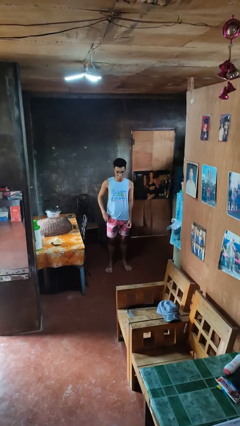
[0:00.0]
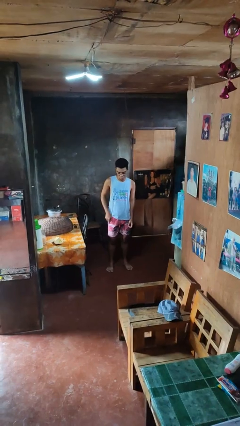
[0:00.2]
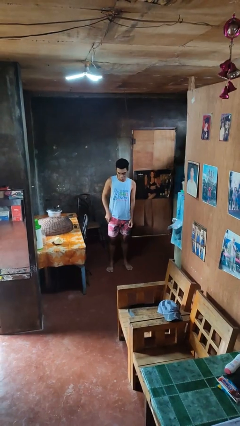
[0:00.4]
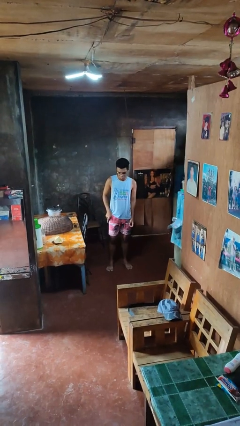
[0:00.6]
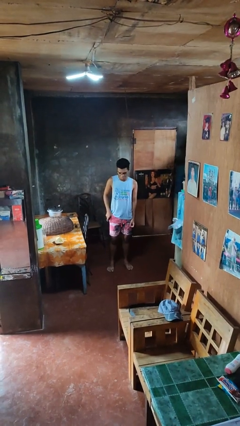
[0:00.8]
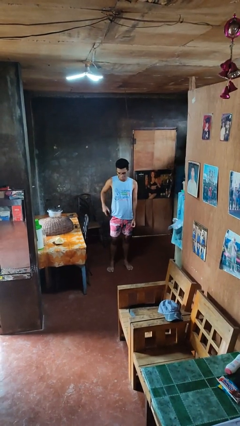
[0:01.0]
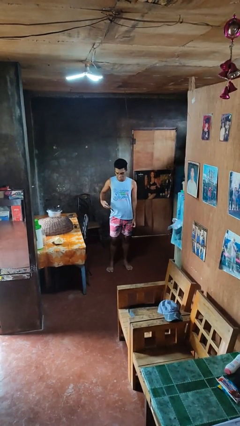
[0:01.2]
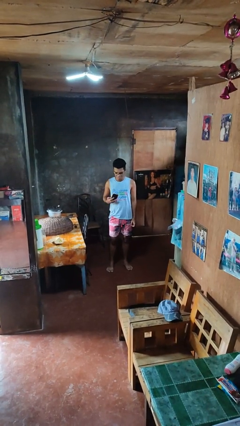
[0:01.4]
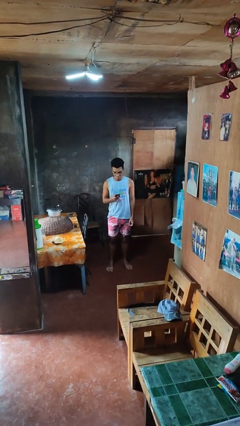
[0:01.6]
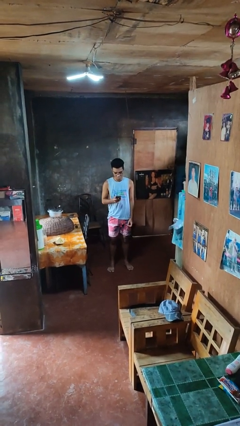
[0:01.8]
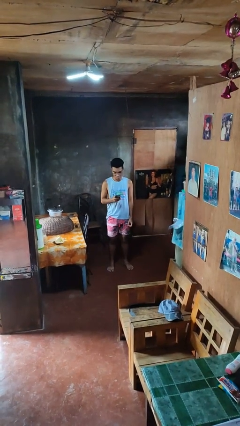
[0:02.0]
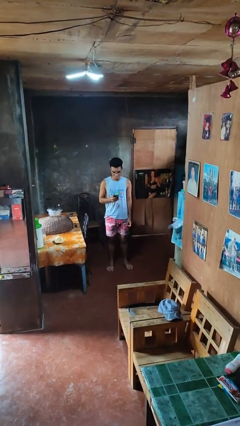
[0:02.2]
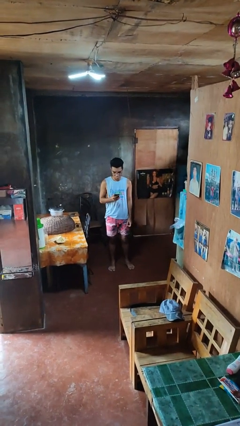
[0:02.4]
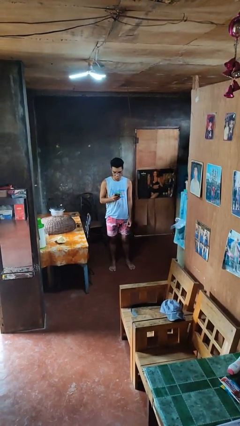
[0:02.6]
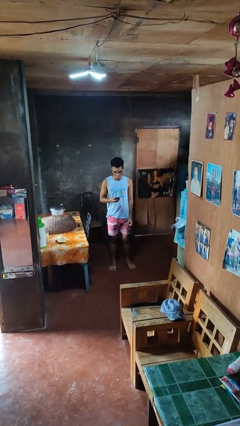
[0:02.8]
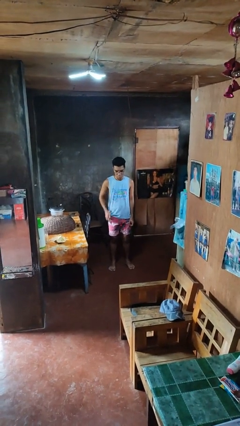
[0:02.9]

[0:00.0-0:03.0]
person takes phone from pocket

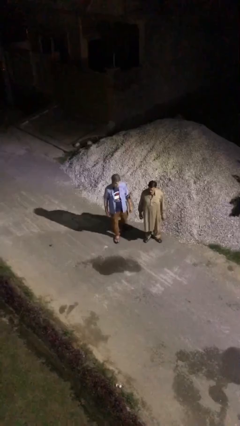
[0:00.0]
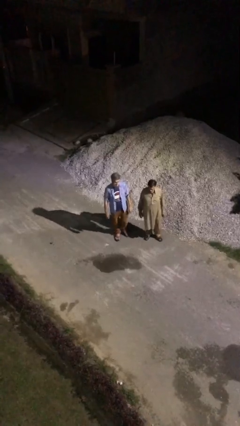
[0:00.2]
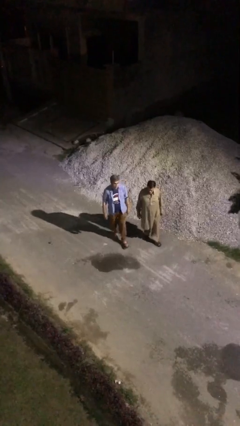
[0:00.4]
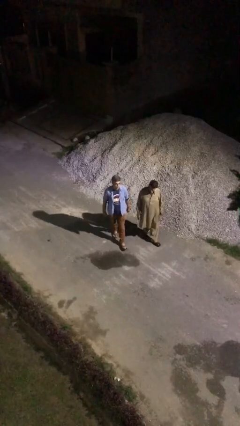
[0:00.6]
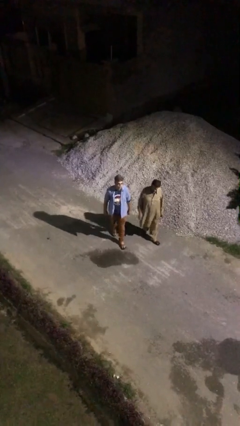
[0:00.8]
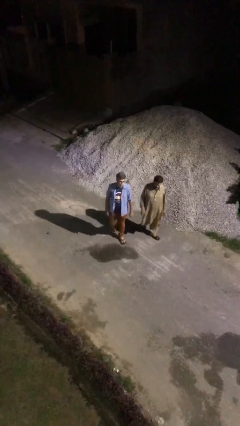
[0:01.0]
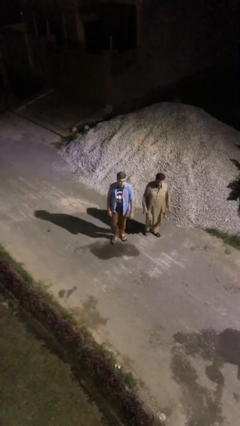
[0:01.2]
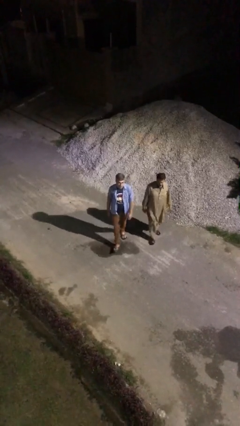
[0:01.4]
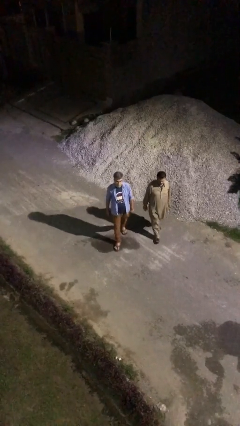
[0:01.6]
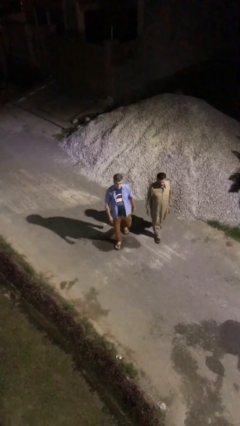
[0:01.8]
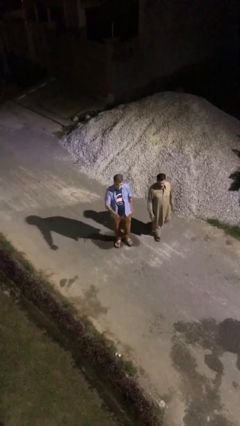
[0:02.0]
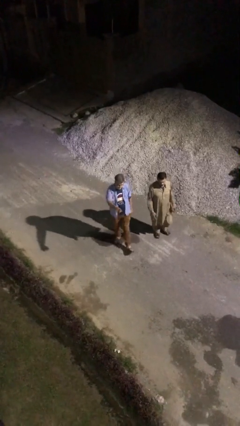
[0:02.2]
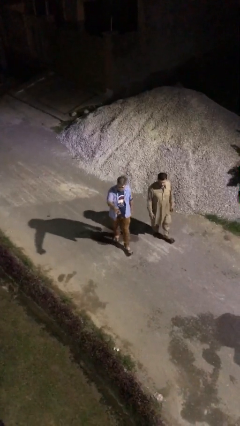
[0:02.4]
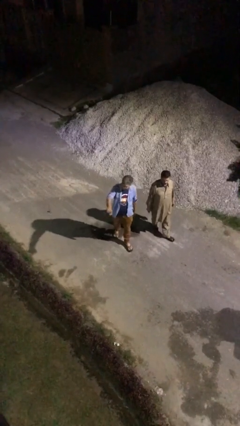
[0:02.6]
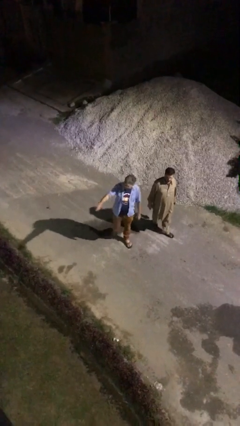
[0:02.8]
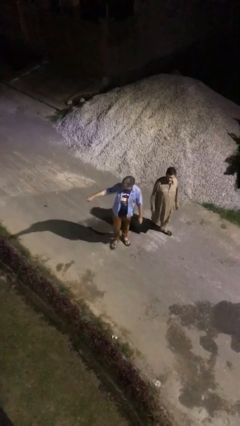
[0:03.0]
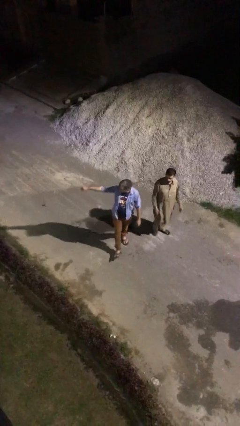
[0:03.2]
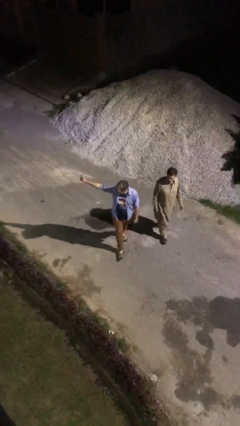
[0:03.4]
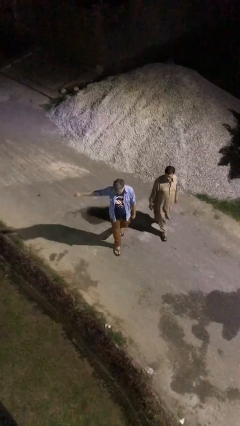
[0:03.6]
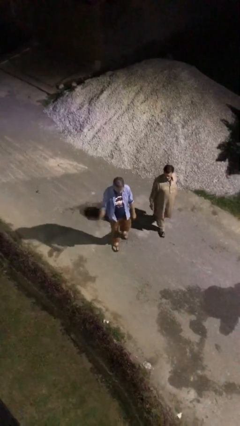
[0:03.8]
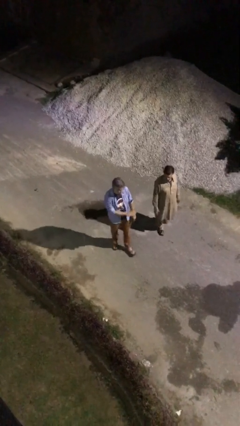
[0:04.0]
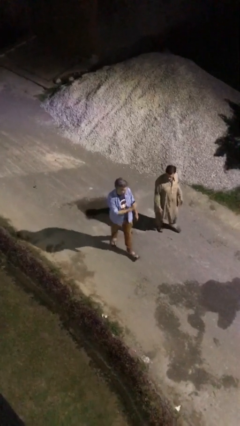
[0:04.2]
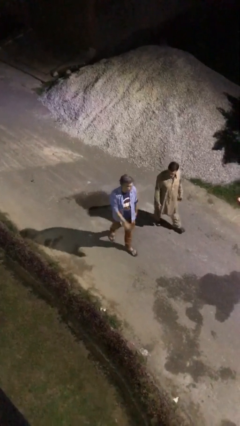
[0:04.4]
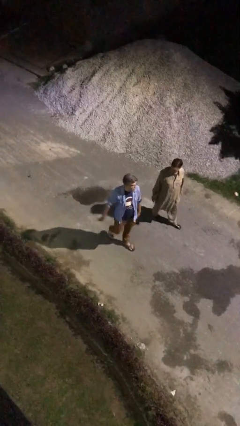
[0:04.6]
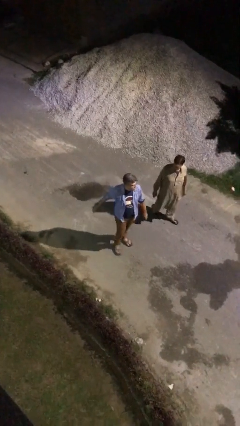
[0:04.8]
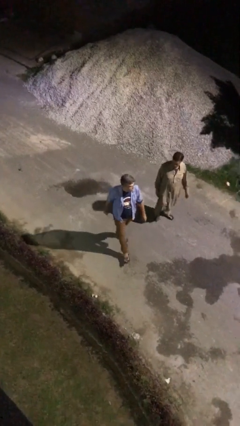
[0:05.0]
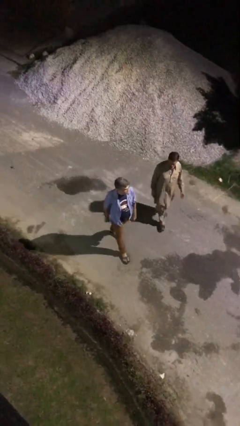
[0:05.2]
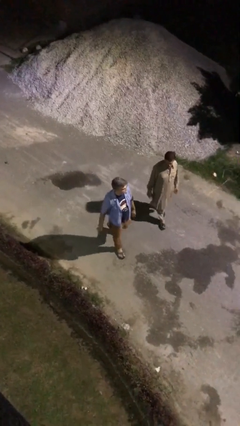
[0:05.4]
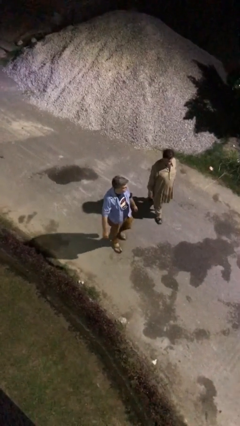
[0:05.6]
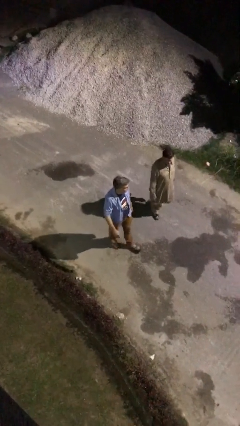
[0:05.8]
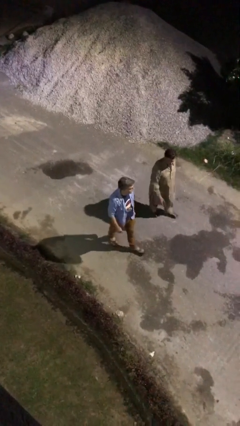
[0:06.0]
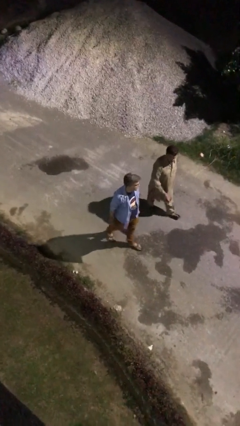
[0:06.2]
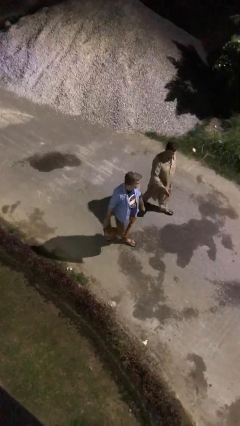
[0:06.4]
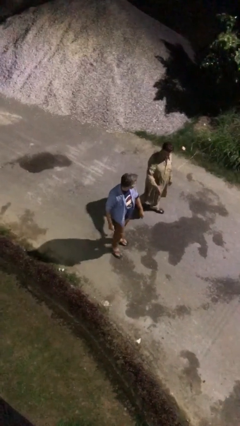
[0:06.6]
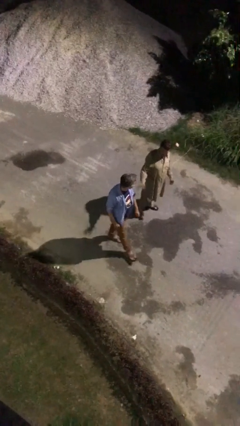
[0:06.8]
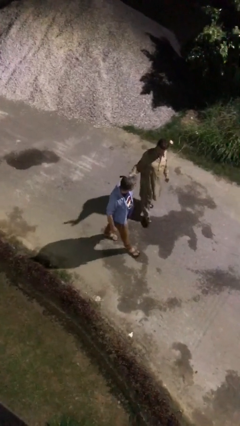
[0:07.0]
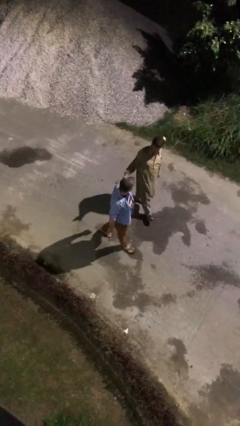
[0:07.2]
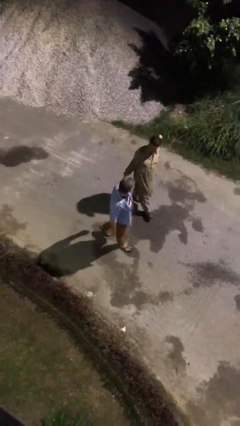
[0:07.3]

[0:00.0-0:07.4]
person talks to person

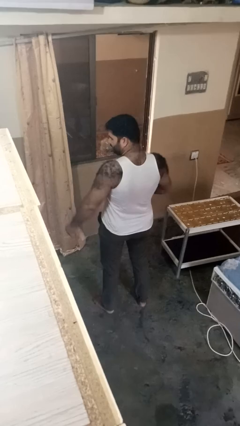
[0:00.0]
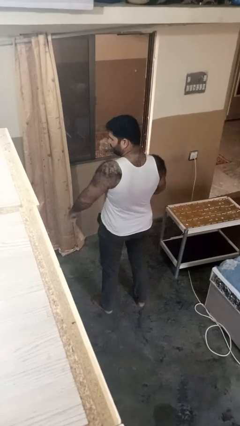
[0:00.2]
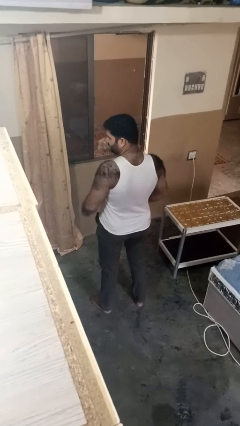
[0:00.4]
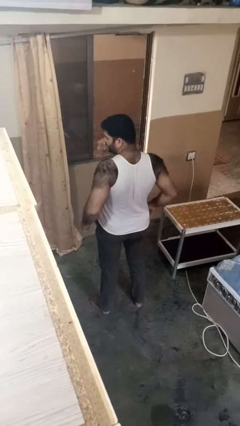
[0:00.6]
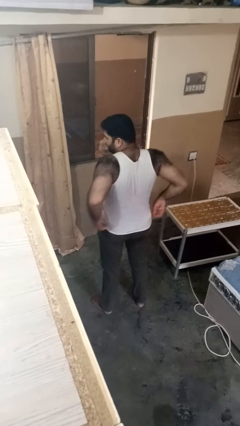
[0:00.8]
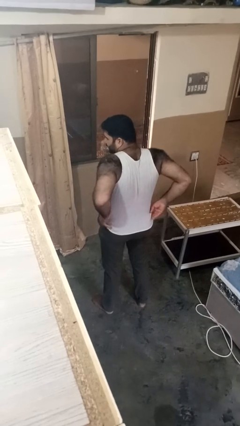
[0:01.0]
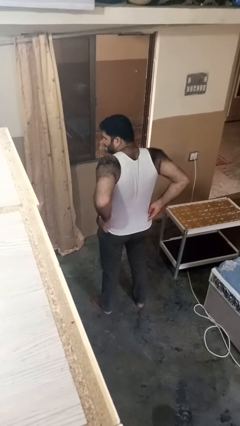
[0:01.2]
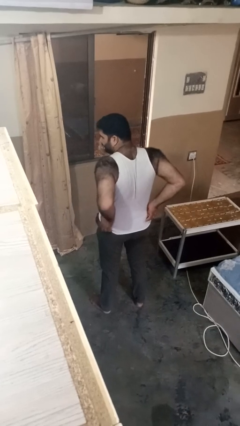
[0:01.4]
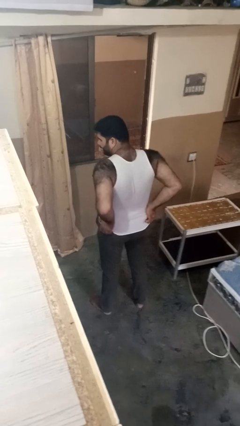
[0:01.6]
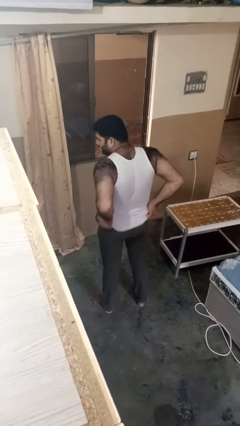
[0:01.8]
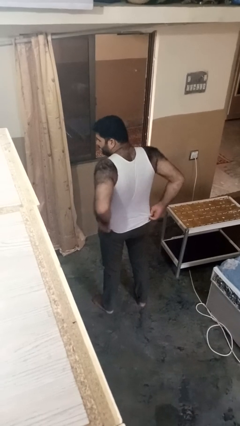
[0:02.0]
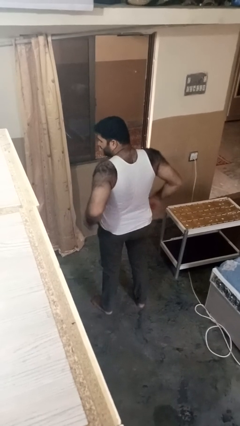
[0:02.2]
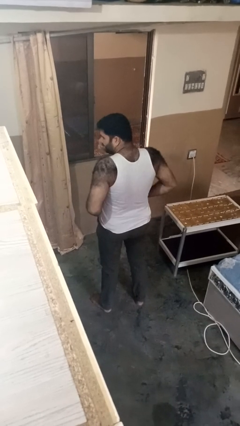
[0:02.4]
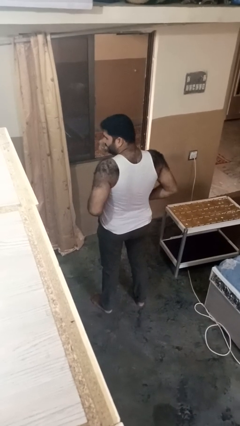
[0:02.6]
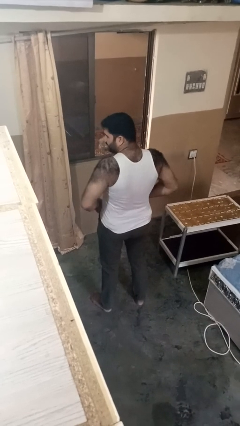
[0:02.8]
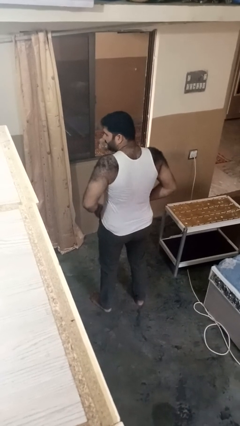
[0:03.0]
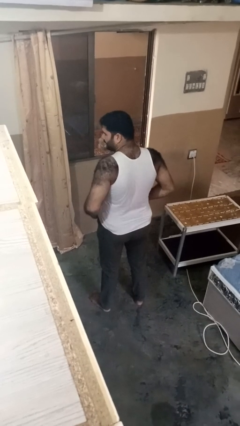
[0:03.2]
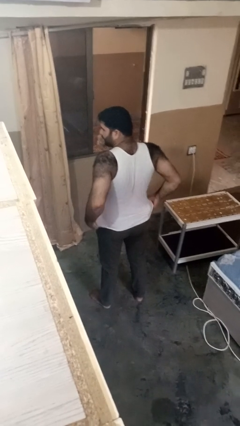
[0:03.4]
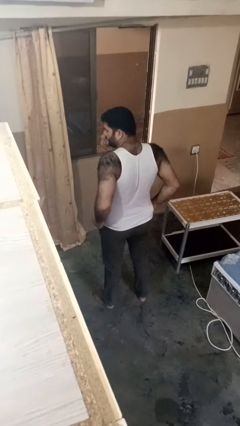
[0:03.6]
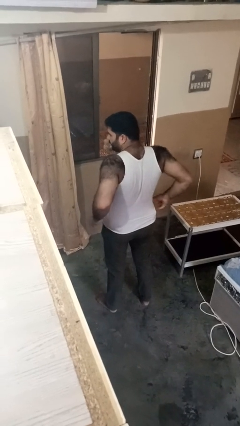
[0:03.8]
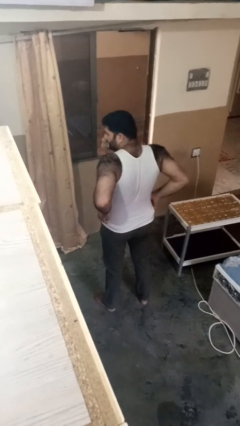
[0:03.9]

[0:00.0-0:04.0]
person hikes up pants

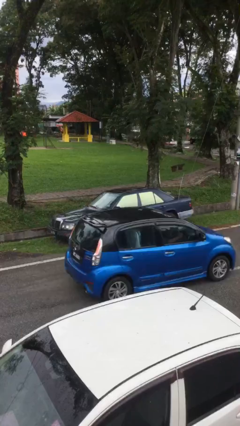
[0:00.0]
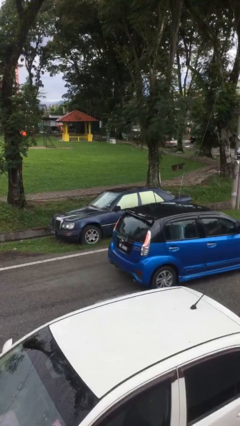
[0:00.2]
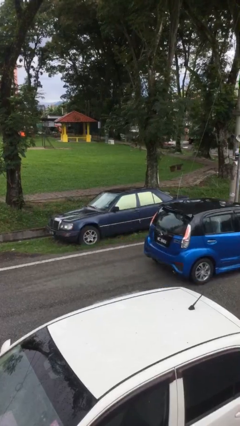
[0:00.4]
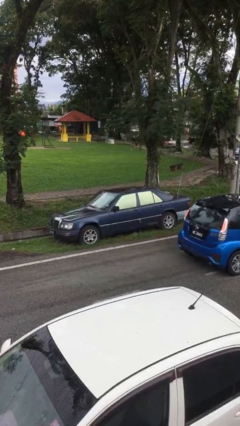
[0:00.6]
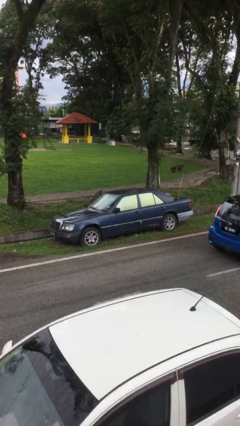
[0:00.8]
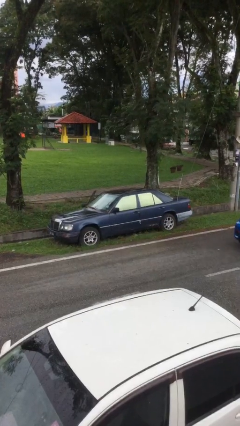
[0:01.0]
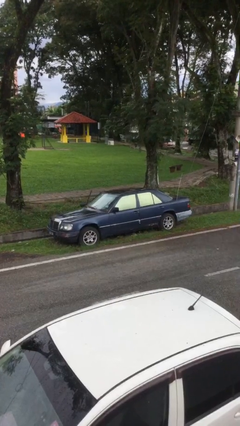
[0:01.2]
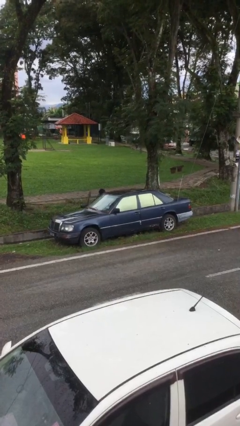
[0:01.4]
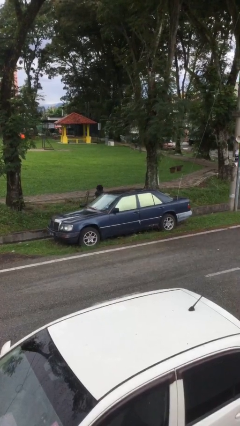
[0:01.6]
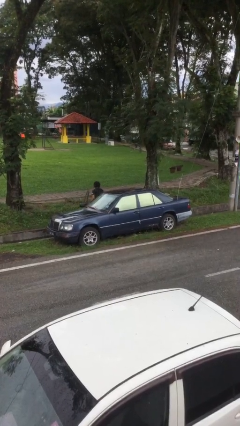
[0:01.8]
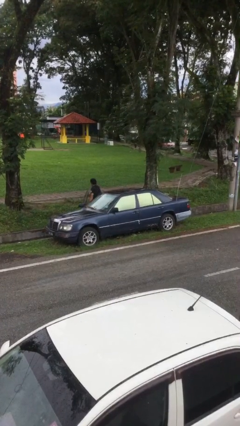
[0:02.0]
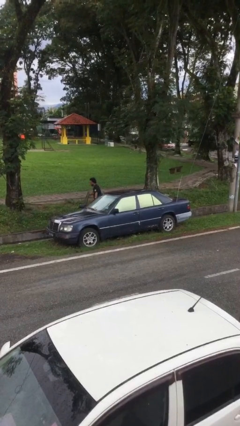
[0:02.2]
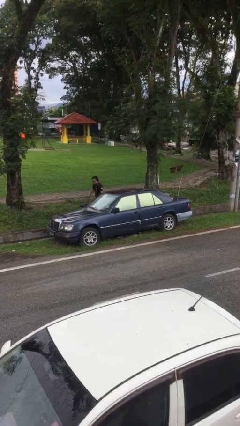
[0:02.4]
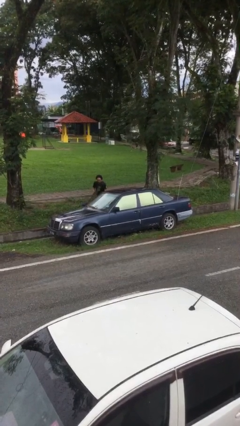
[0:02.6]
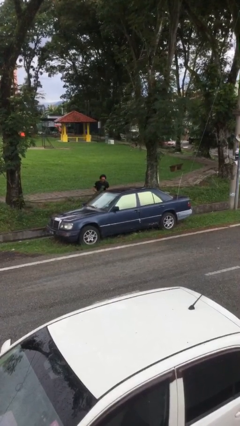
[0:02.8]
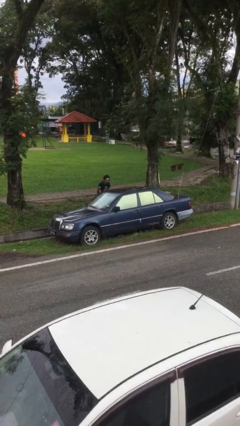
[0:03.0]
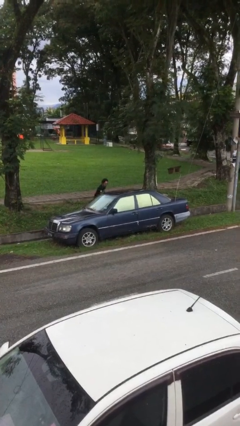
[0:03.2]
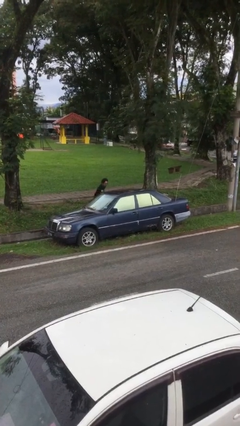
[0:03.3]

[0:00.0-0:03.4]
car drops off person
